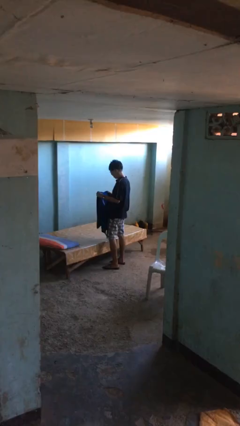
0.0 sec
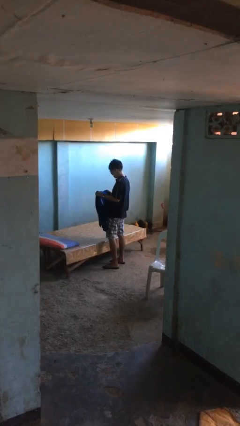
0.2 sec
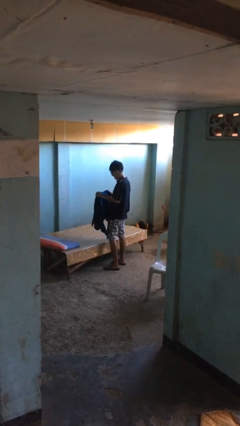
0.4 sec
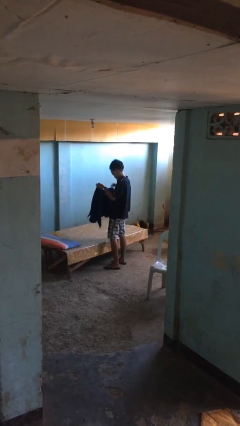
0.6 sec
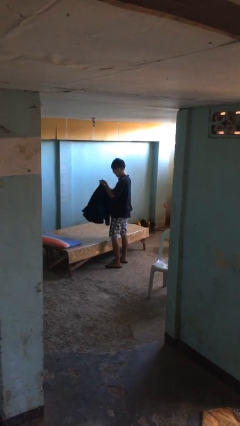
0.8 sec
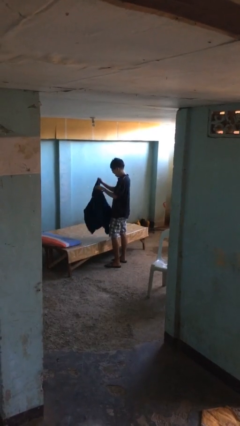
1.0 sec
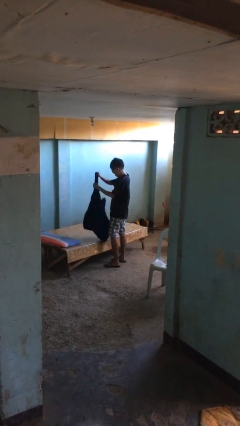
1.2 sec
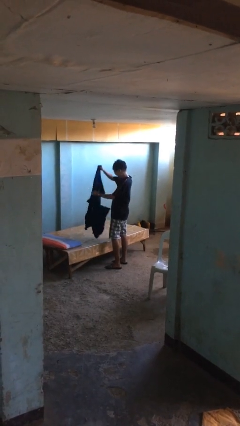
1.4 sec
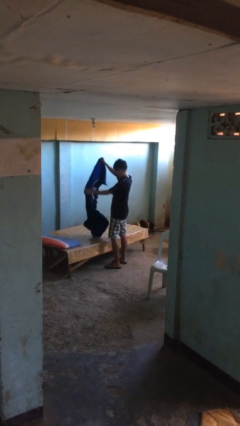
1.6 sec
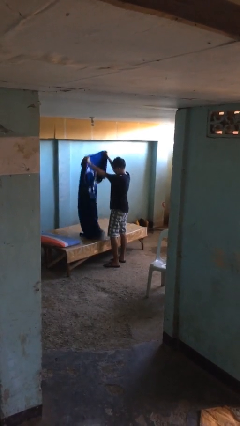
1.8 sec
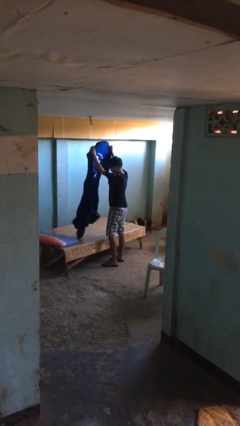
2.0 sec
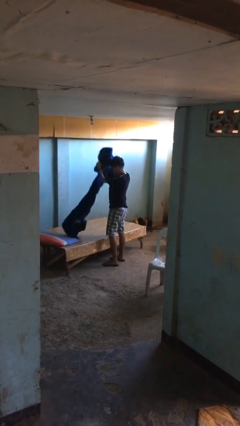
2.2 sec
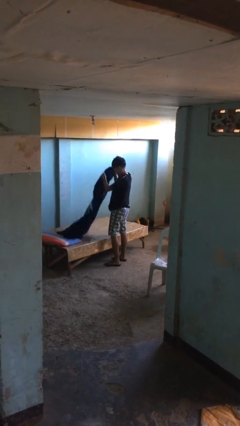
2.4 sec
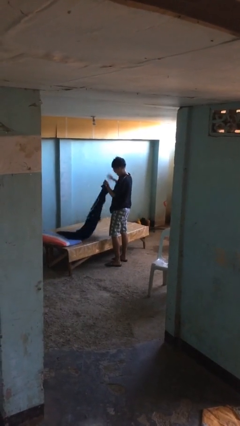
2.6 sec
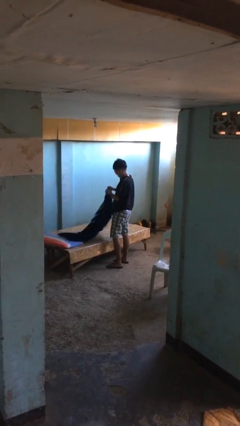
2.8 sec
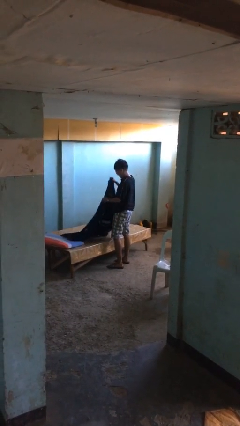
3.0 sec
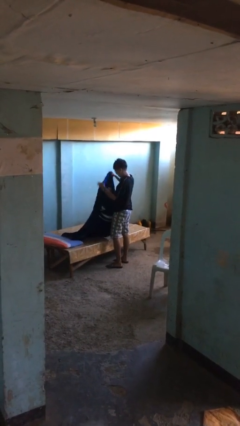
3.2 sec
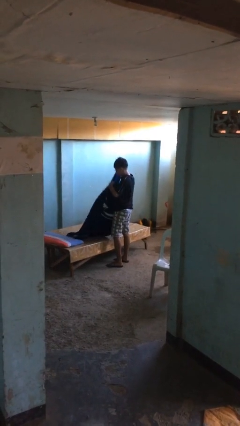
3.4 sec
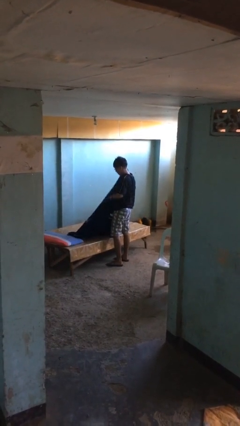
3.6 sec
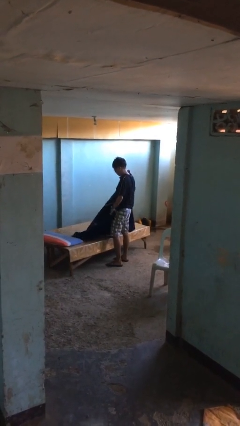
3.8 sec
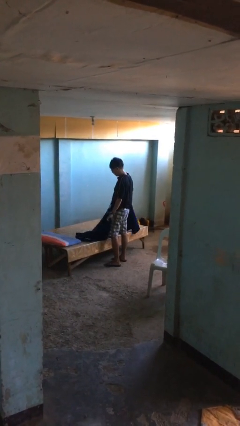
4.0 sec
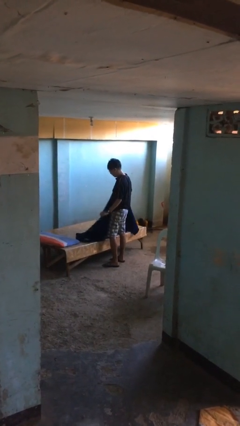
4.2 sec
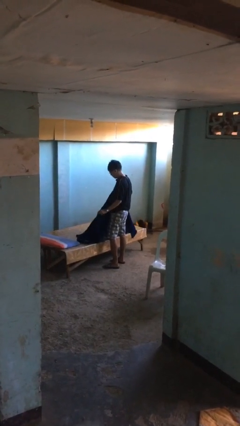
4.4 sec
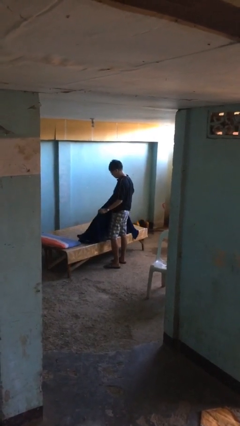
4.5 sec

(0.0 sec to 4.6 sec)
person unfolds blanket

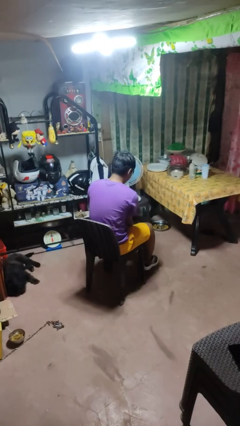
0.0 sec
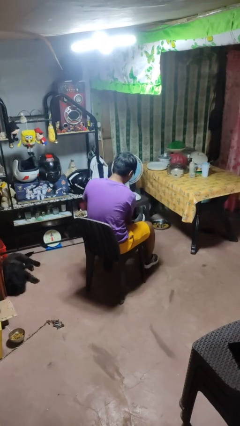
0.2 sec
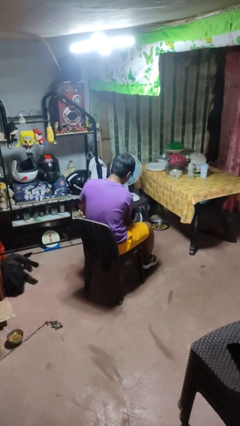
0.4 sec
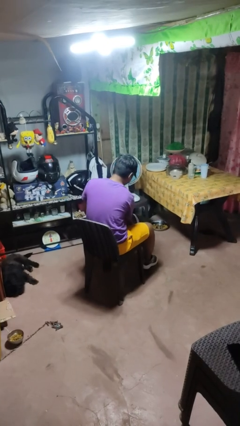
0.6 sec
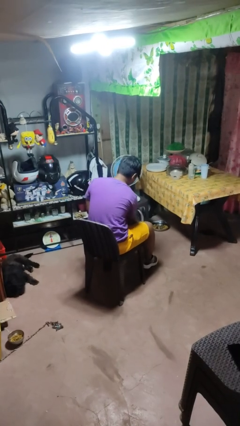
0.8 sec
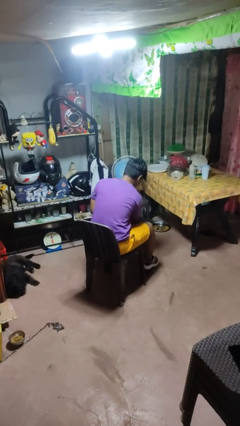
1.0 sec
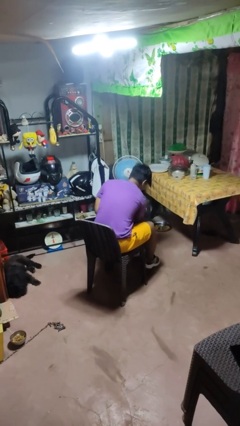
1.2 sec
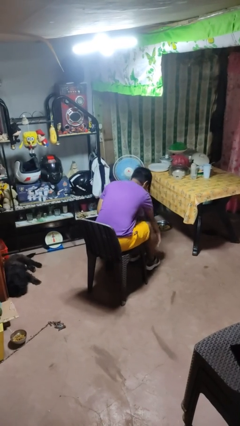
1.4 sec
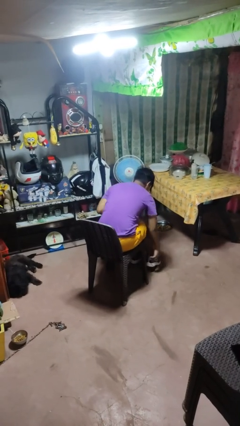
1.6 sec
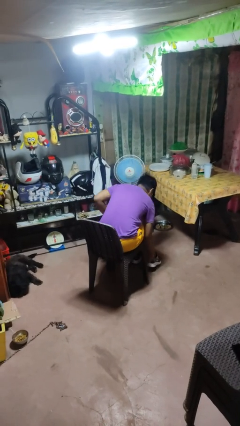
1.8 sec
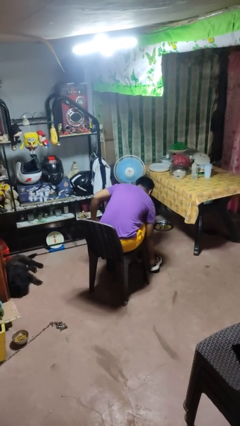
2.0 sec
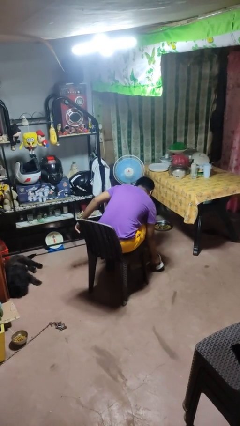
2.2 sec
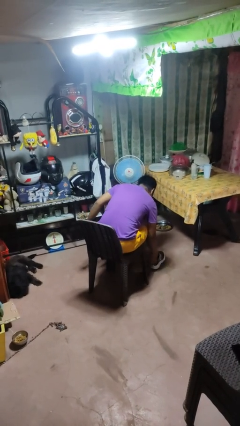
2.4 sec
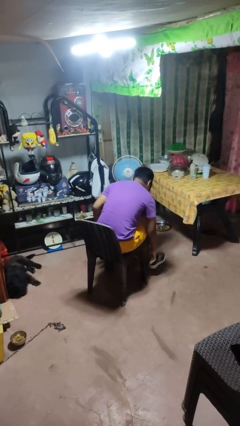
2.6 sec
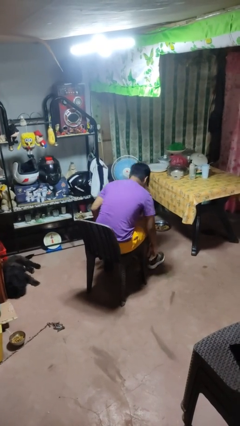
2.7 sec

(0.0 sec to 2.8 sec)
person takes off shoes

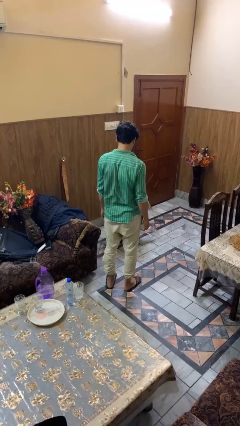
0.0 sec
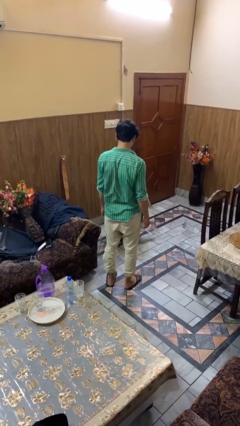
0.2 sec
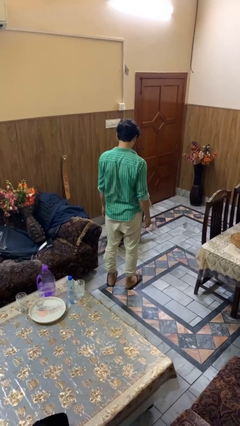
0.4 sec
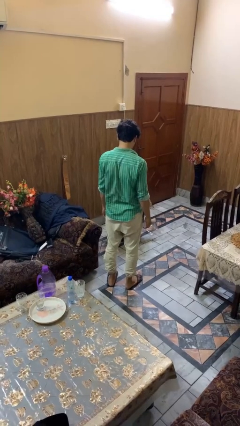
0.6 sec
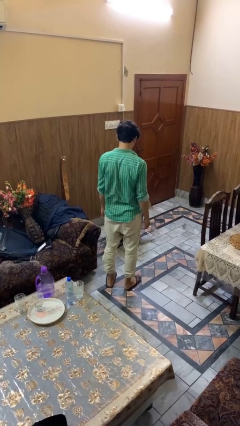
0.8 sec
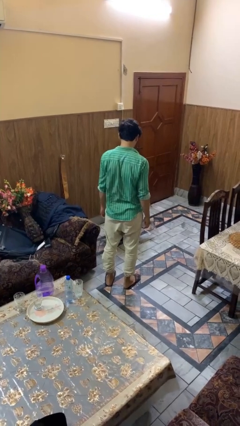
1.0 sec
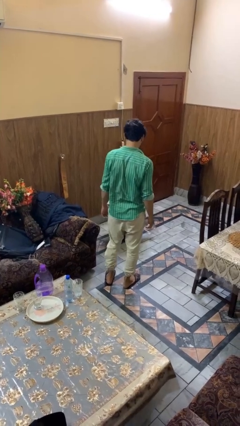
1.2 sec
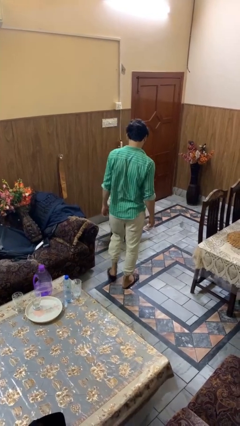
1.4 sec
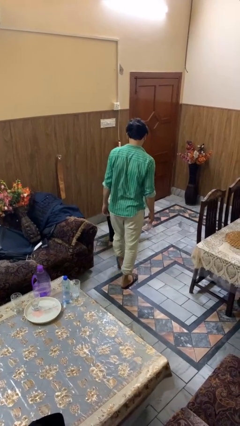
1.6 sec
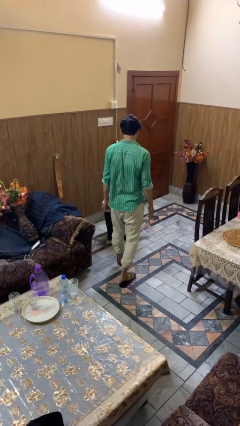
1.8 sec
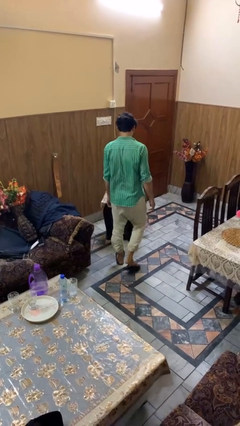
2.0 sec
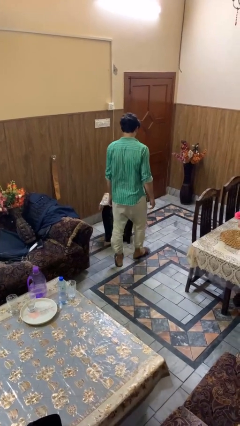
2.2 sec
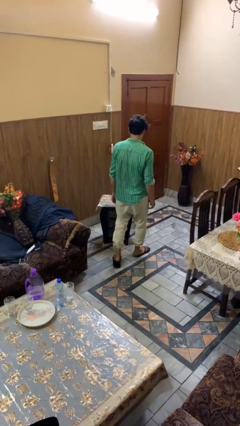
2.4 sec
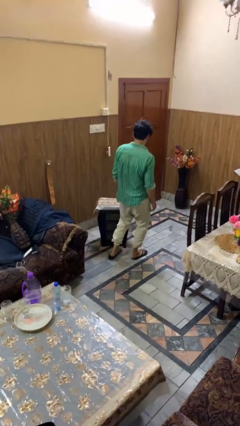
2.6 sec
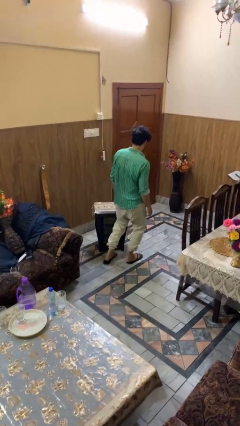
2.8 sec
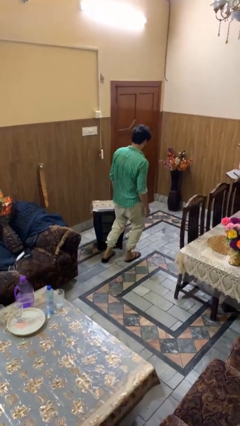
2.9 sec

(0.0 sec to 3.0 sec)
person trips on object on floor

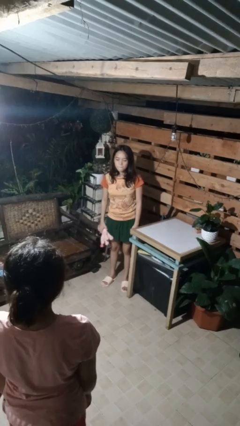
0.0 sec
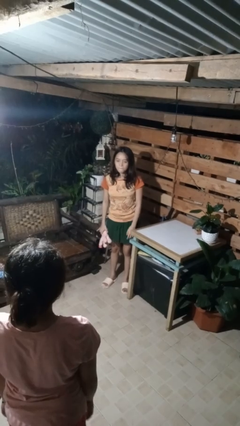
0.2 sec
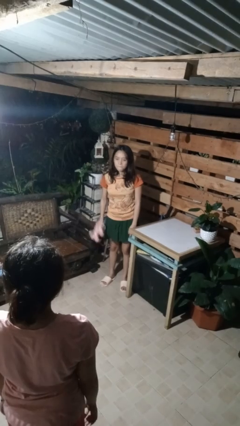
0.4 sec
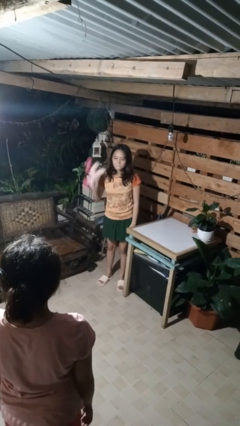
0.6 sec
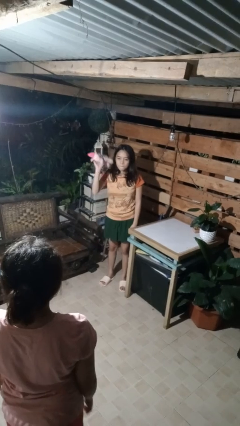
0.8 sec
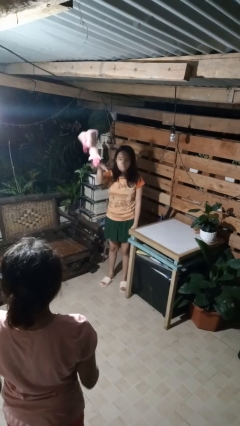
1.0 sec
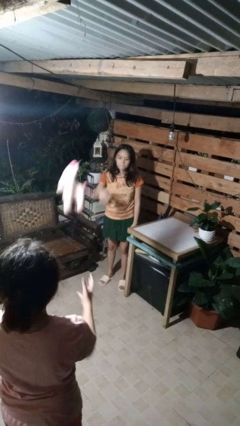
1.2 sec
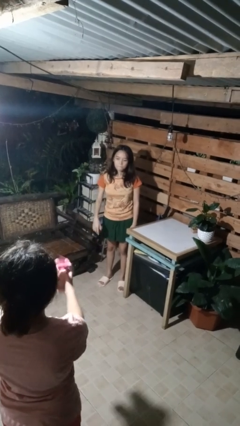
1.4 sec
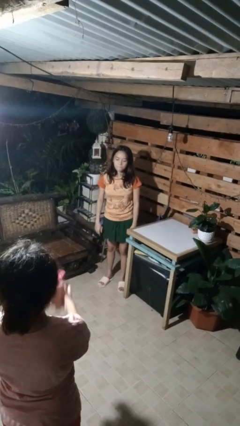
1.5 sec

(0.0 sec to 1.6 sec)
person throws object to person

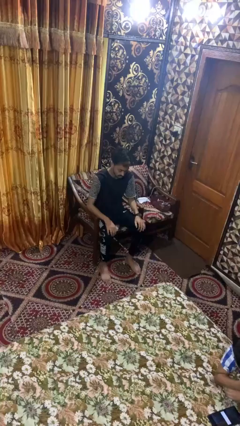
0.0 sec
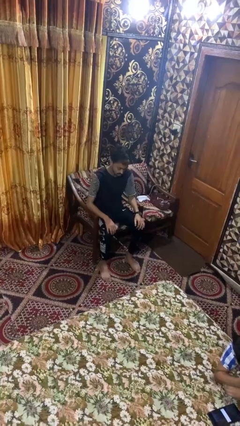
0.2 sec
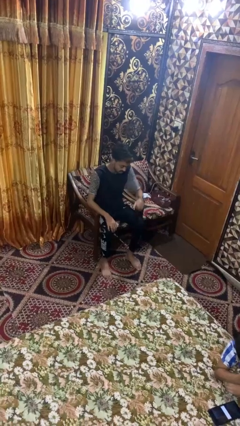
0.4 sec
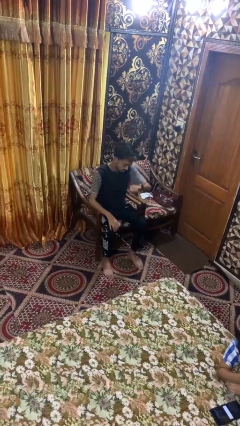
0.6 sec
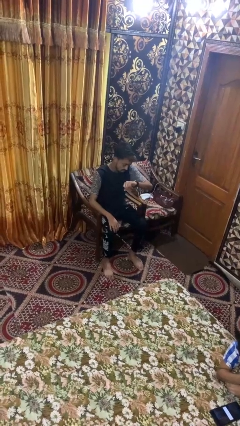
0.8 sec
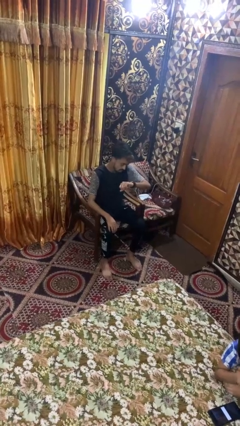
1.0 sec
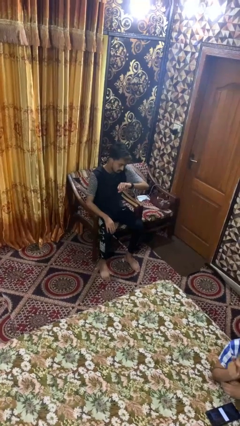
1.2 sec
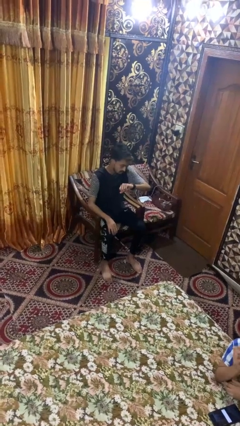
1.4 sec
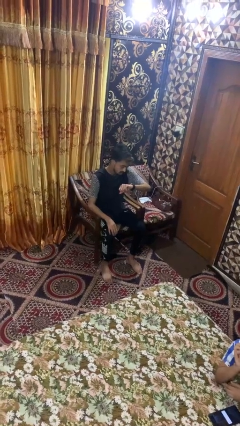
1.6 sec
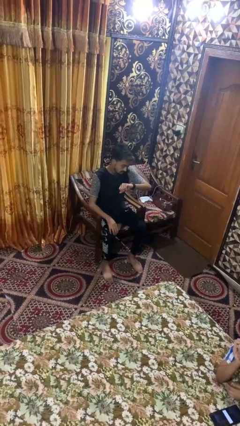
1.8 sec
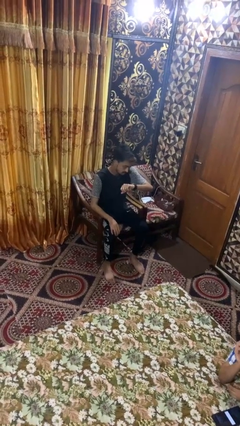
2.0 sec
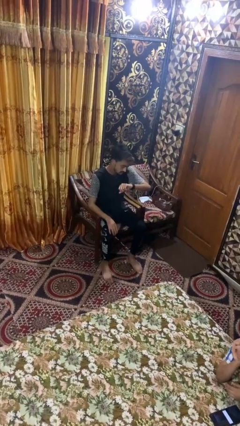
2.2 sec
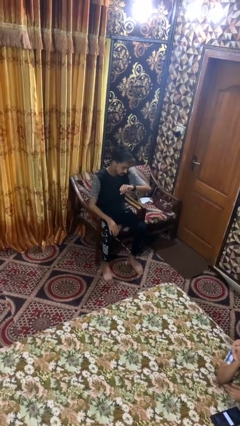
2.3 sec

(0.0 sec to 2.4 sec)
person looks at wristwatch

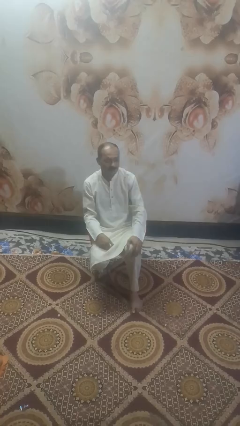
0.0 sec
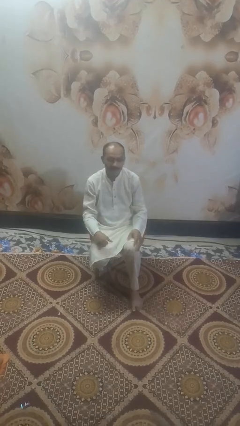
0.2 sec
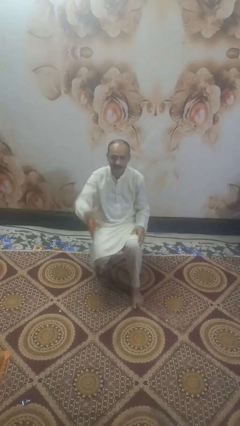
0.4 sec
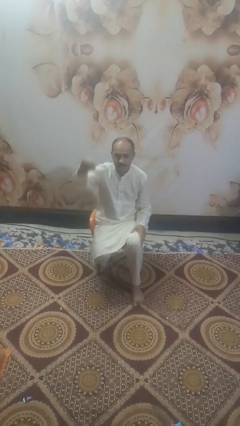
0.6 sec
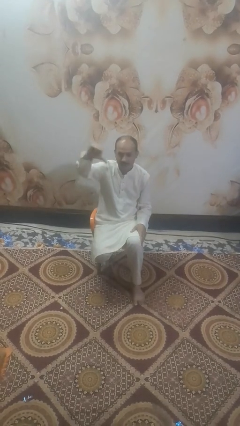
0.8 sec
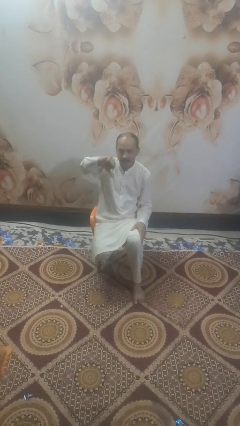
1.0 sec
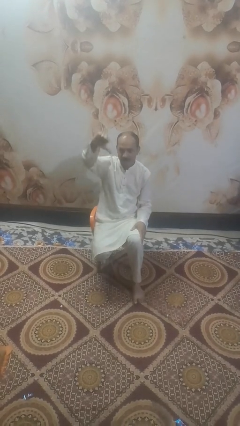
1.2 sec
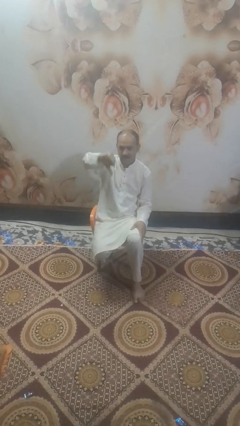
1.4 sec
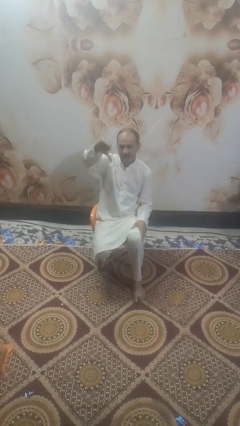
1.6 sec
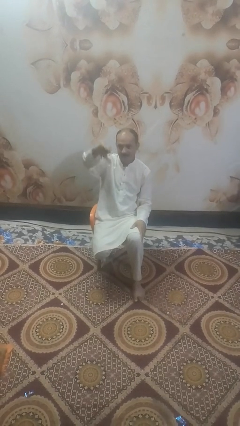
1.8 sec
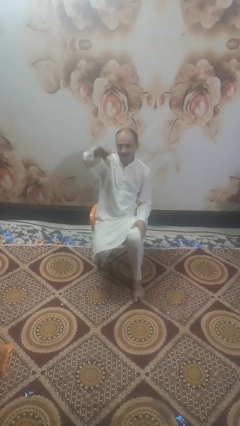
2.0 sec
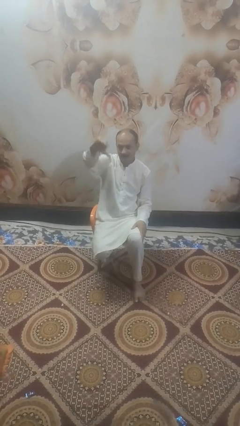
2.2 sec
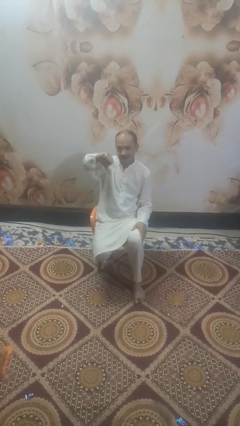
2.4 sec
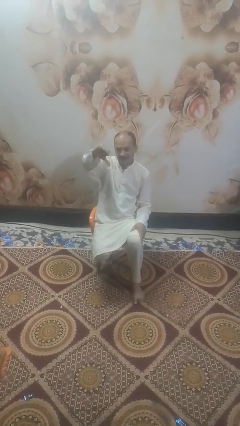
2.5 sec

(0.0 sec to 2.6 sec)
person gestures thumbs down

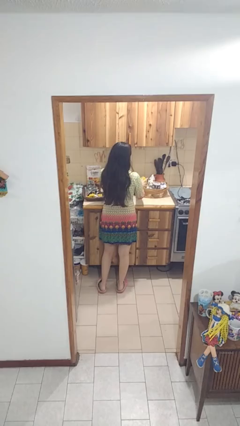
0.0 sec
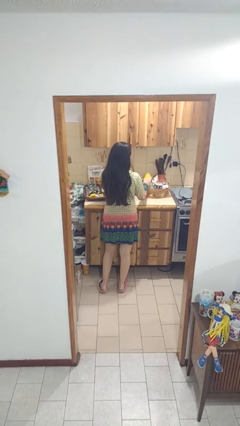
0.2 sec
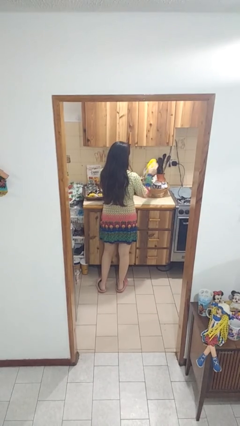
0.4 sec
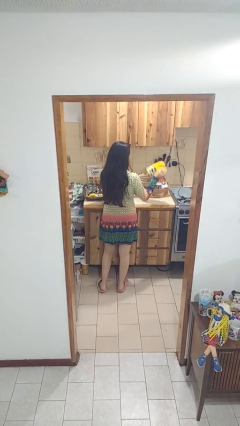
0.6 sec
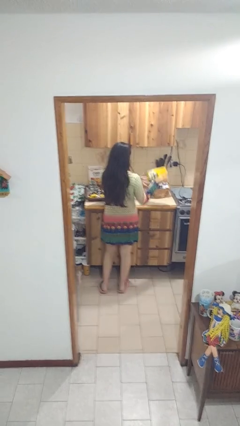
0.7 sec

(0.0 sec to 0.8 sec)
person takes object from bag
